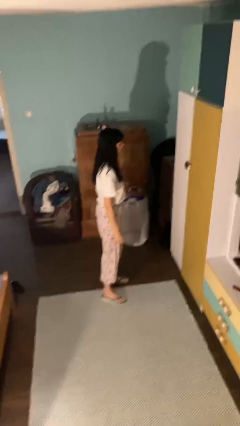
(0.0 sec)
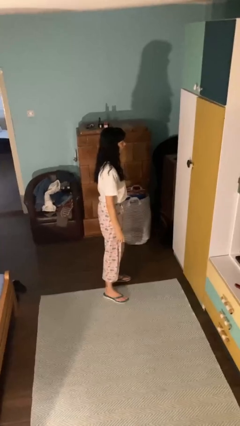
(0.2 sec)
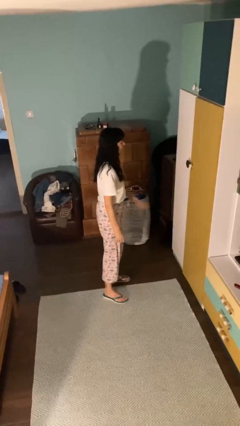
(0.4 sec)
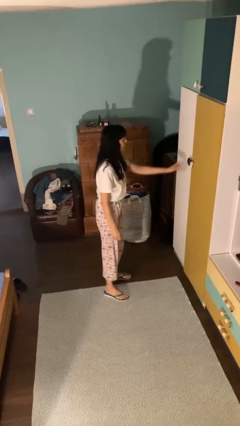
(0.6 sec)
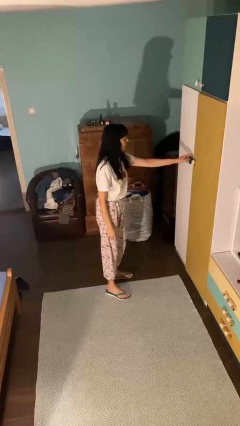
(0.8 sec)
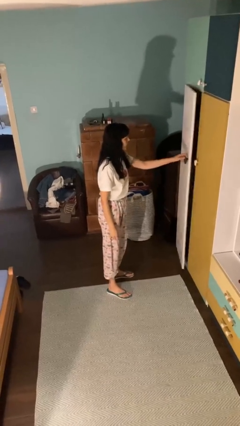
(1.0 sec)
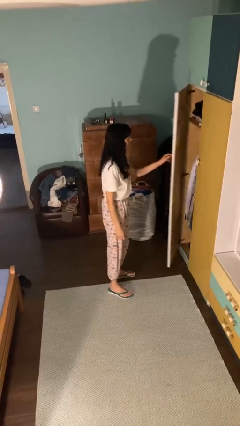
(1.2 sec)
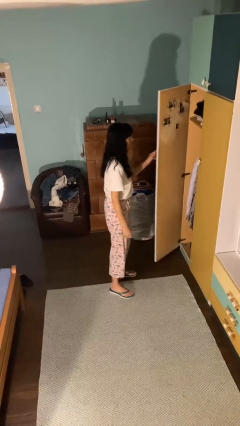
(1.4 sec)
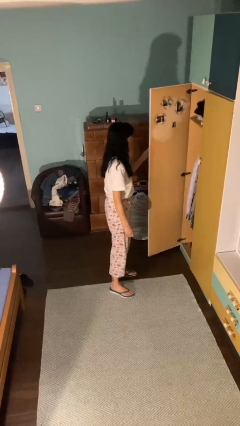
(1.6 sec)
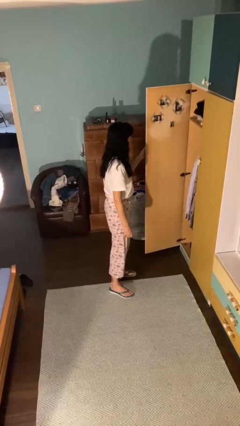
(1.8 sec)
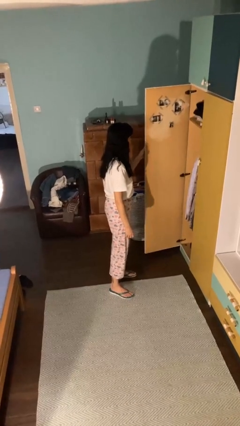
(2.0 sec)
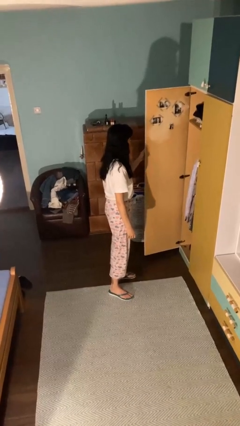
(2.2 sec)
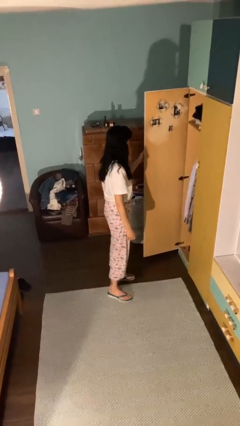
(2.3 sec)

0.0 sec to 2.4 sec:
person opens closet door

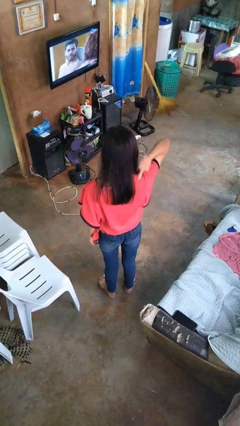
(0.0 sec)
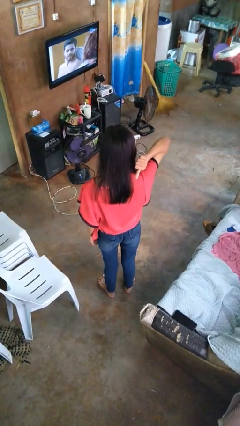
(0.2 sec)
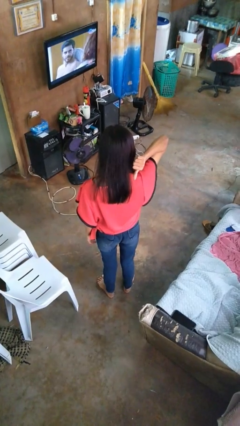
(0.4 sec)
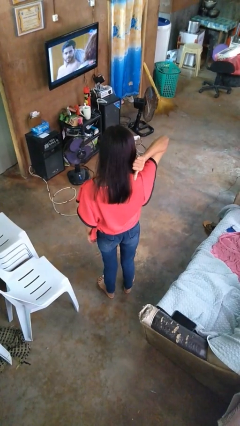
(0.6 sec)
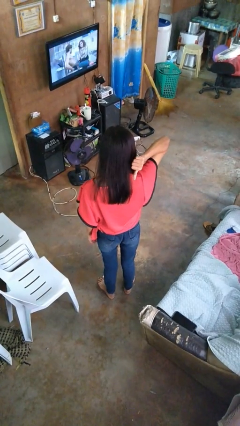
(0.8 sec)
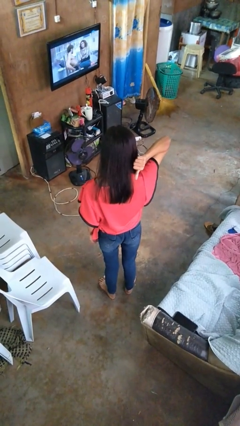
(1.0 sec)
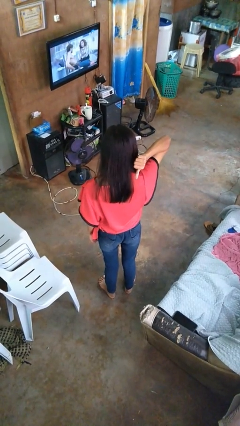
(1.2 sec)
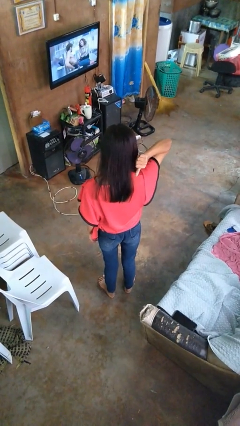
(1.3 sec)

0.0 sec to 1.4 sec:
person gestures behind me

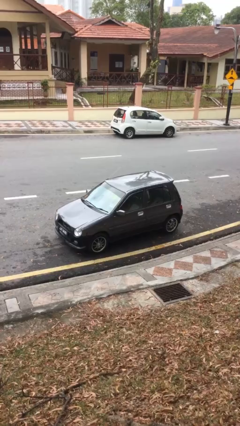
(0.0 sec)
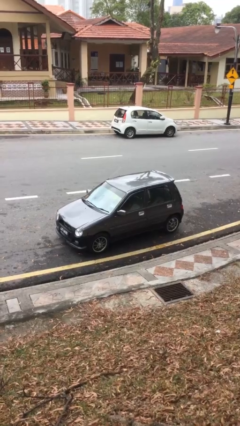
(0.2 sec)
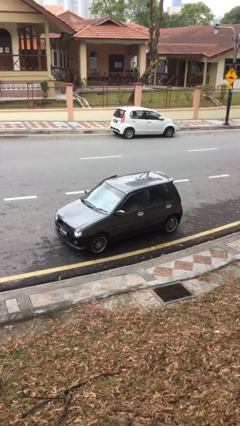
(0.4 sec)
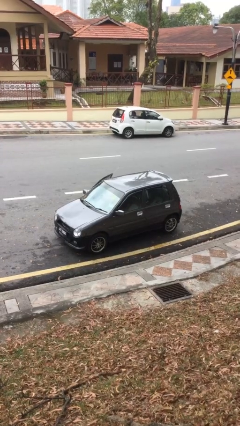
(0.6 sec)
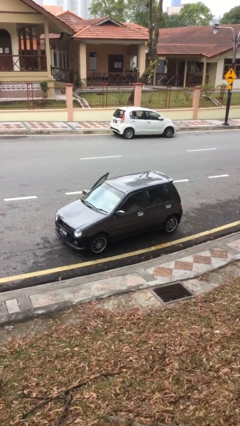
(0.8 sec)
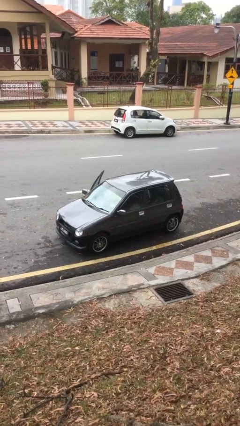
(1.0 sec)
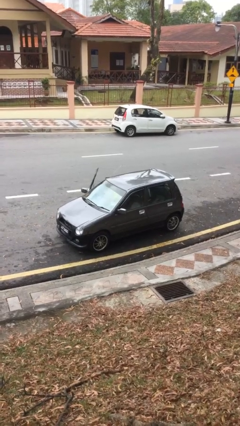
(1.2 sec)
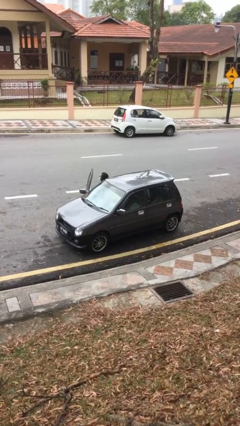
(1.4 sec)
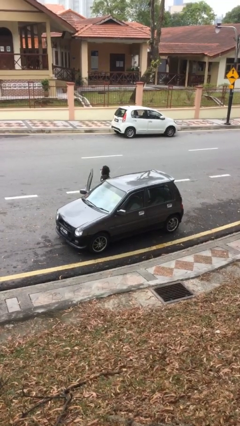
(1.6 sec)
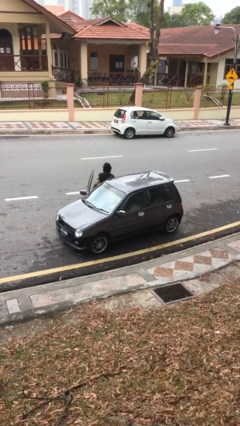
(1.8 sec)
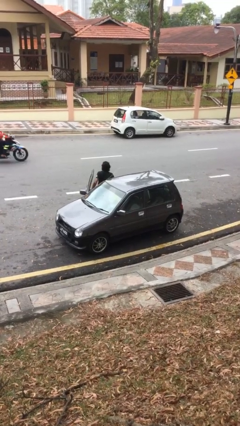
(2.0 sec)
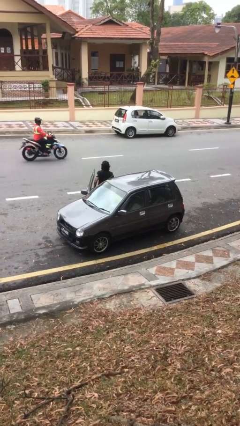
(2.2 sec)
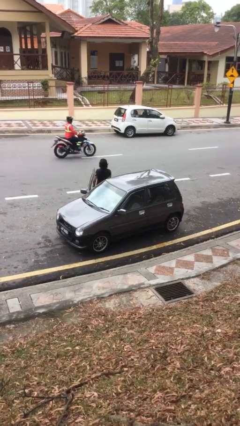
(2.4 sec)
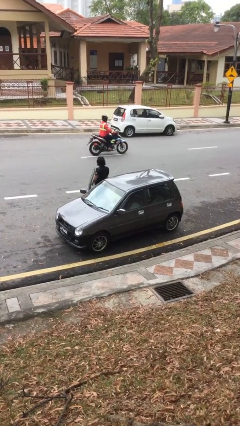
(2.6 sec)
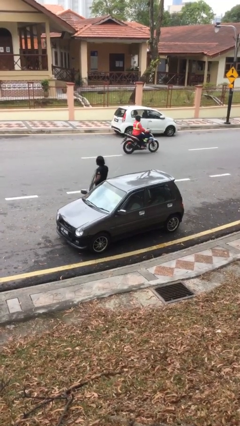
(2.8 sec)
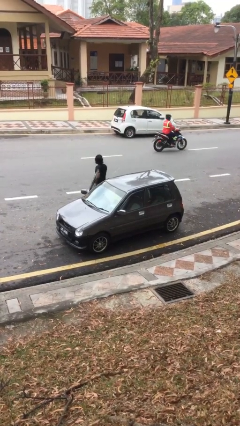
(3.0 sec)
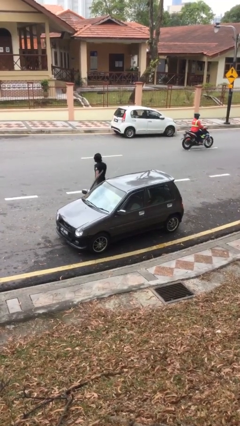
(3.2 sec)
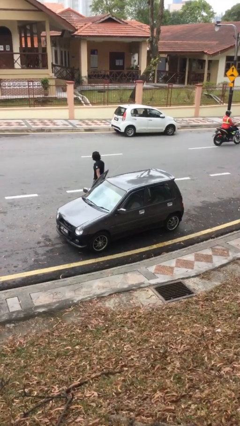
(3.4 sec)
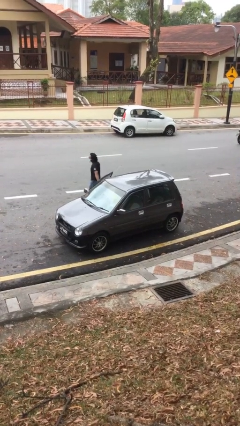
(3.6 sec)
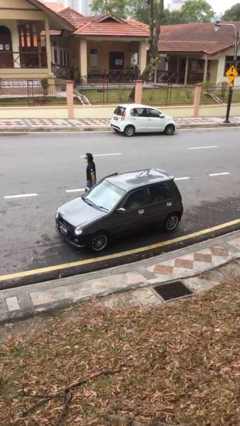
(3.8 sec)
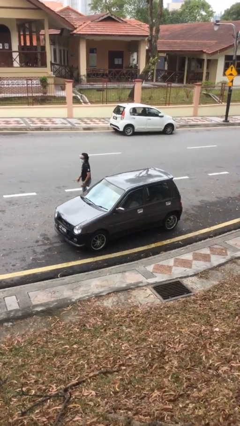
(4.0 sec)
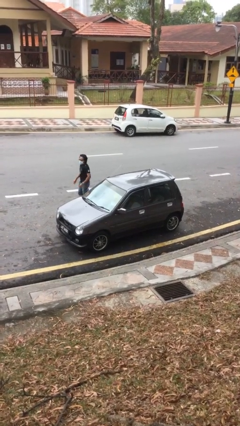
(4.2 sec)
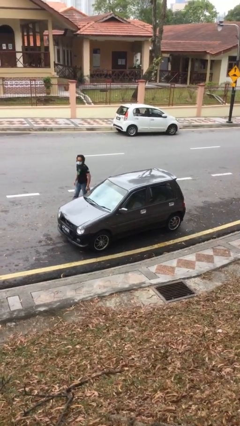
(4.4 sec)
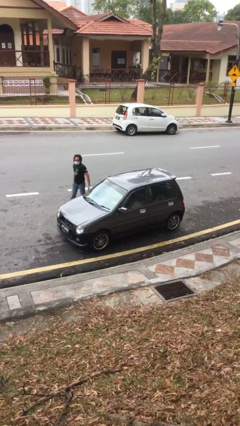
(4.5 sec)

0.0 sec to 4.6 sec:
car drops off person

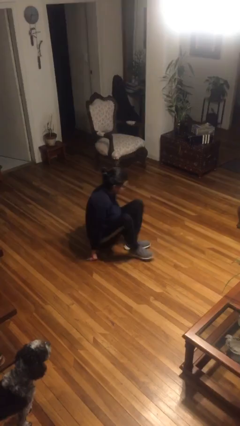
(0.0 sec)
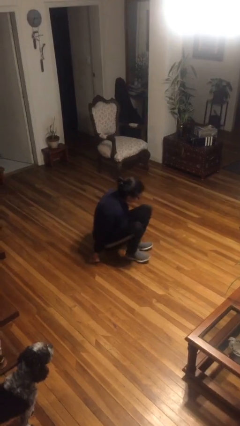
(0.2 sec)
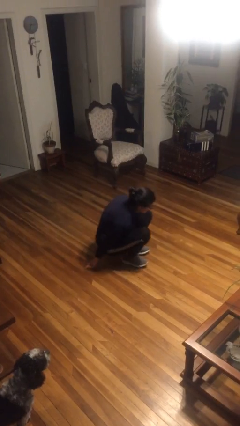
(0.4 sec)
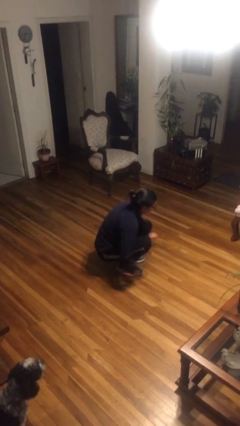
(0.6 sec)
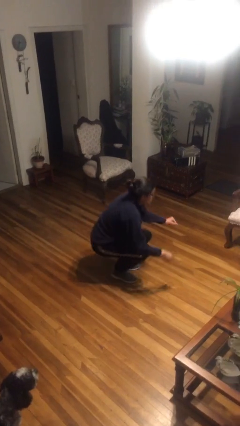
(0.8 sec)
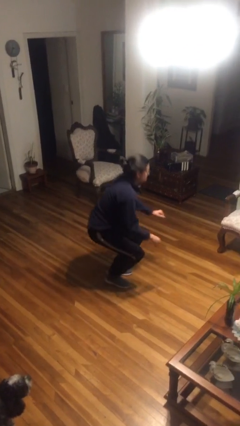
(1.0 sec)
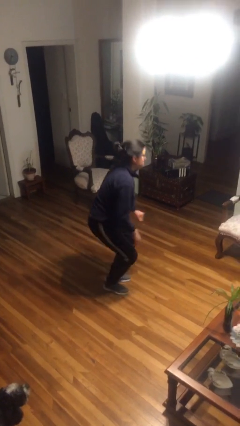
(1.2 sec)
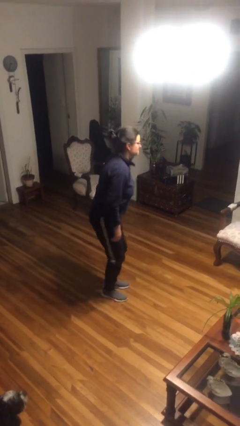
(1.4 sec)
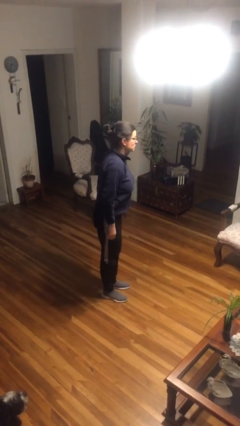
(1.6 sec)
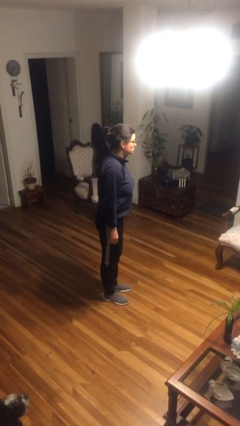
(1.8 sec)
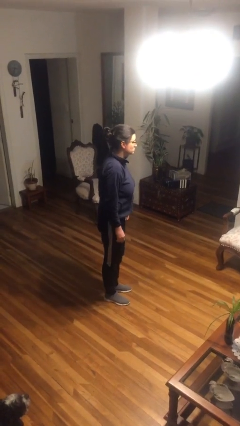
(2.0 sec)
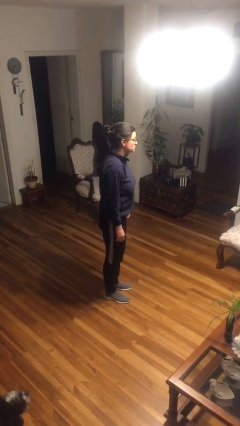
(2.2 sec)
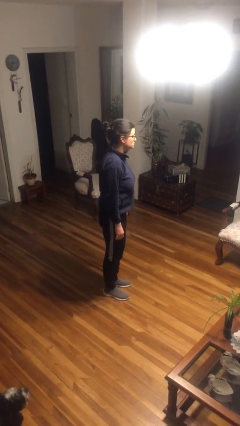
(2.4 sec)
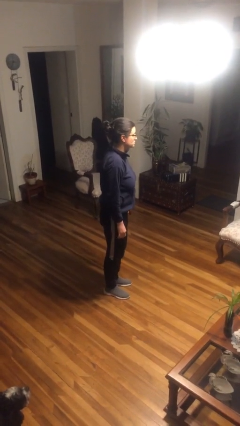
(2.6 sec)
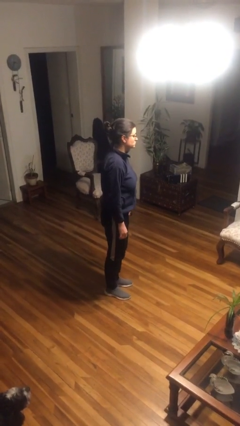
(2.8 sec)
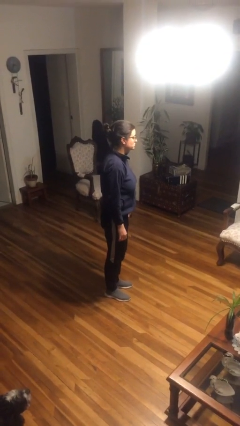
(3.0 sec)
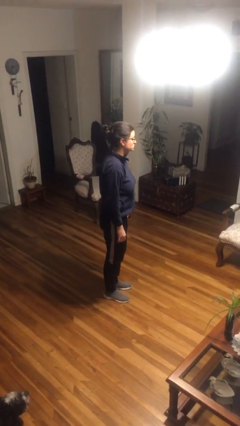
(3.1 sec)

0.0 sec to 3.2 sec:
person stands up from floor

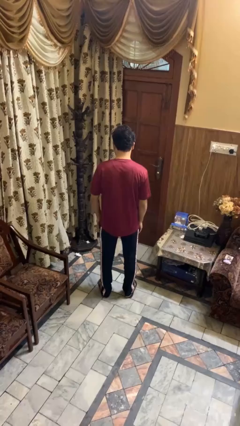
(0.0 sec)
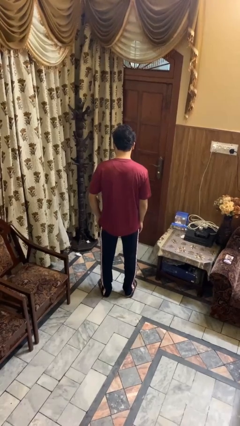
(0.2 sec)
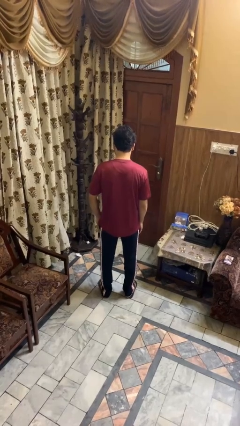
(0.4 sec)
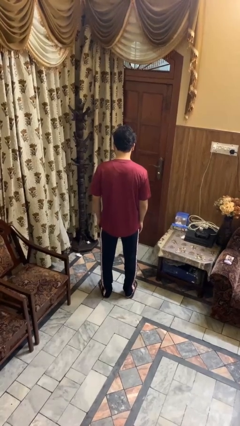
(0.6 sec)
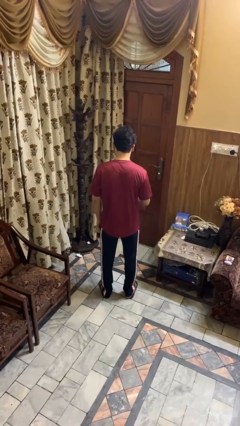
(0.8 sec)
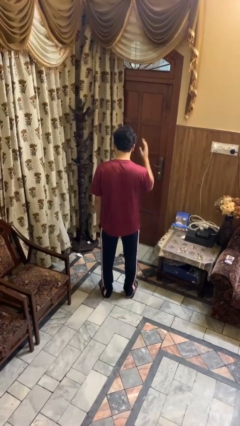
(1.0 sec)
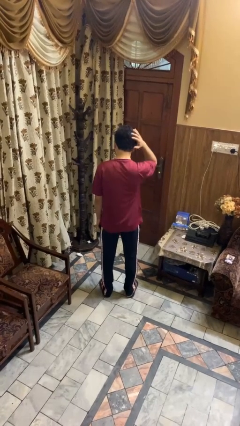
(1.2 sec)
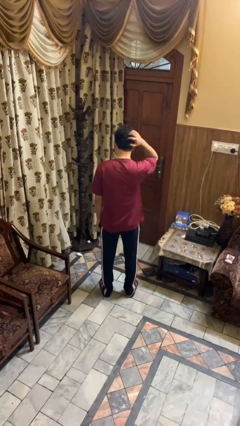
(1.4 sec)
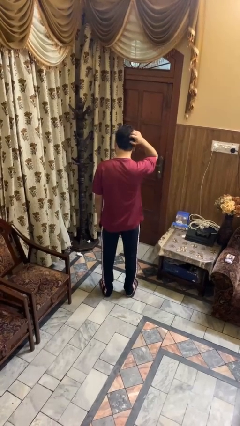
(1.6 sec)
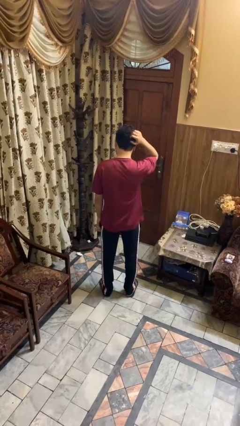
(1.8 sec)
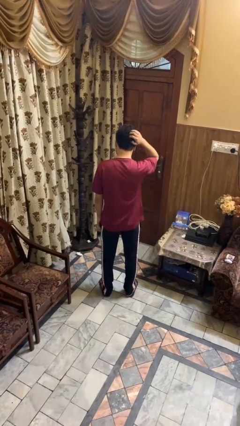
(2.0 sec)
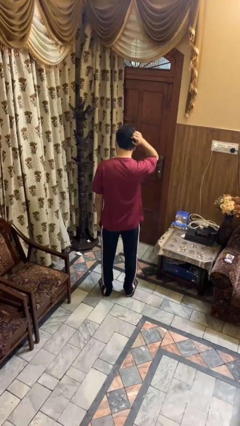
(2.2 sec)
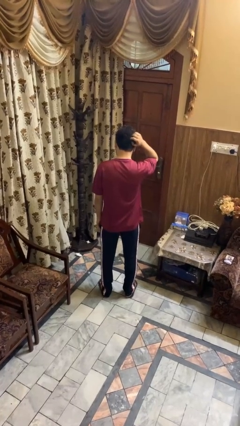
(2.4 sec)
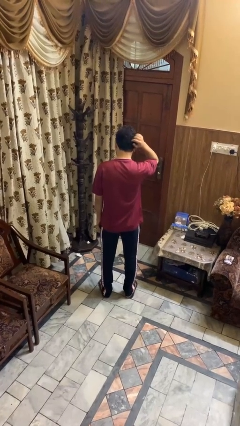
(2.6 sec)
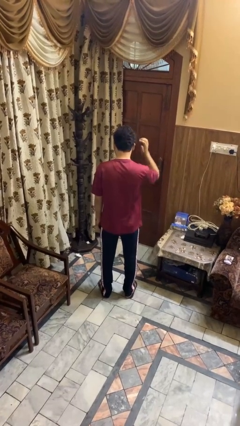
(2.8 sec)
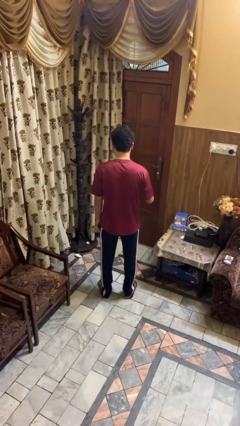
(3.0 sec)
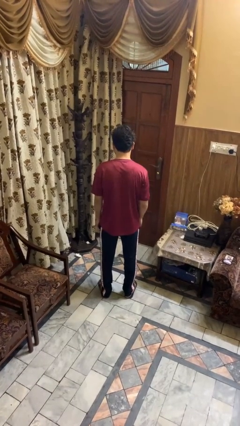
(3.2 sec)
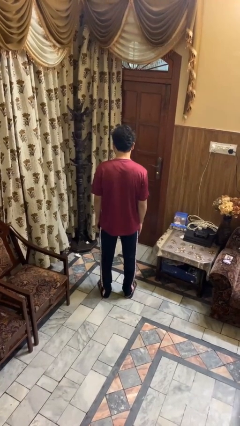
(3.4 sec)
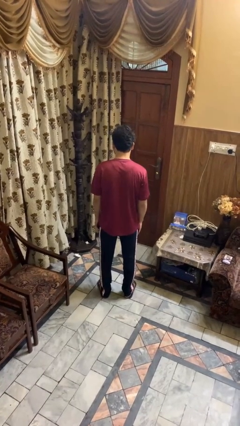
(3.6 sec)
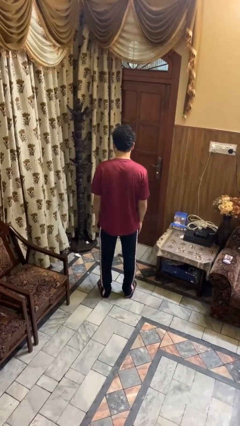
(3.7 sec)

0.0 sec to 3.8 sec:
person scratches face

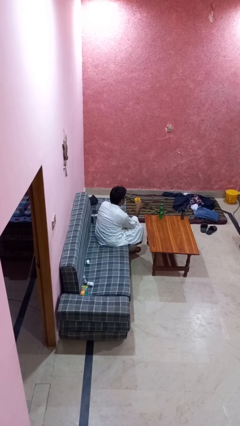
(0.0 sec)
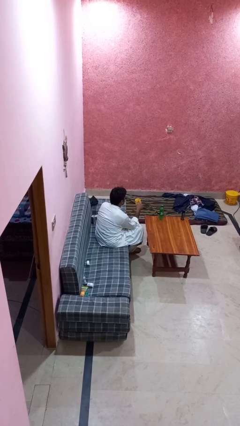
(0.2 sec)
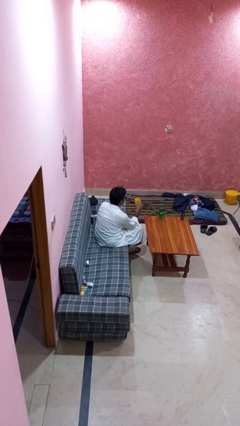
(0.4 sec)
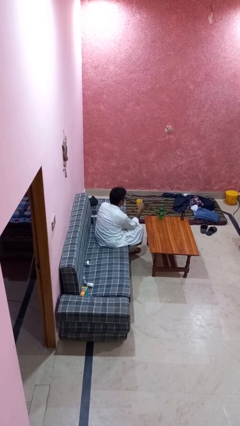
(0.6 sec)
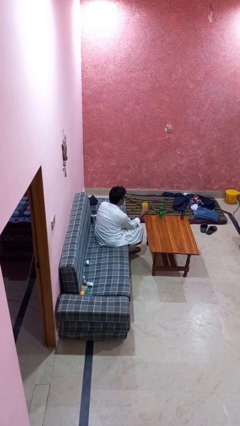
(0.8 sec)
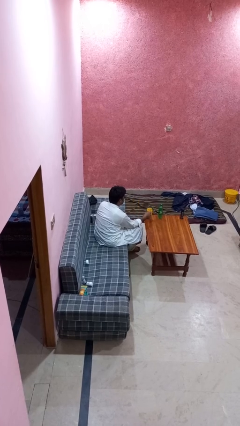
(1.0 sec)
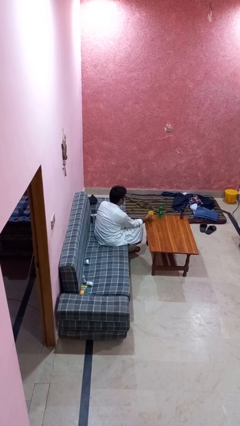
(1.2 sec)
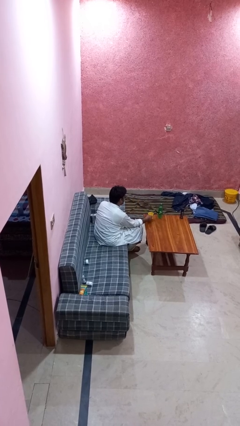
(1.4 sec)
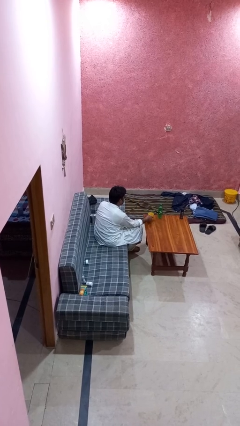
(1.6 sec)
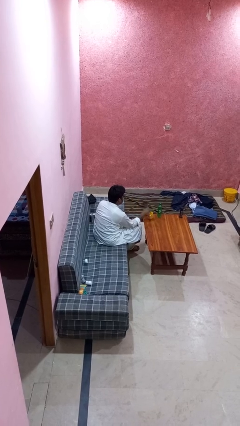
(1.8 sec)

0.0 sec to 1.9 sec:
person puts down object on table
